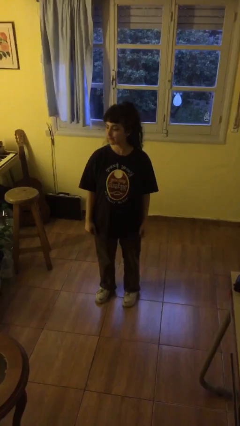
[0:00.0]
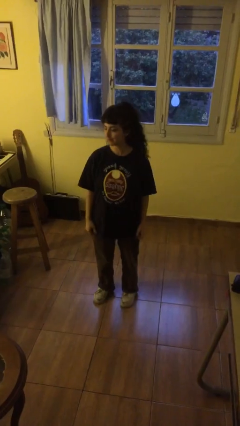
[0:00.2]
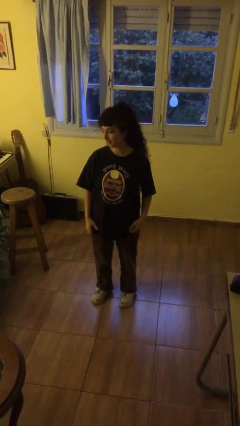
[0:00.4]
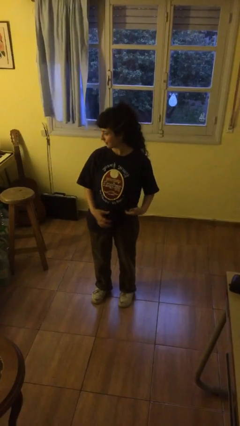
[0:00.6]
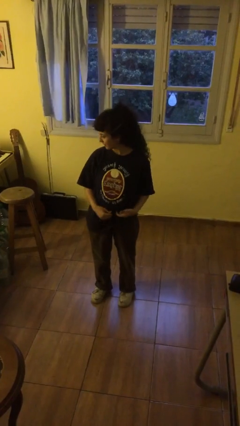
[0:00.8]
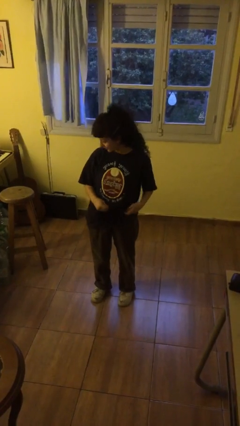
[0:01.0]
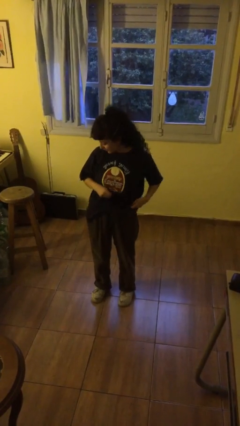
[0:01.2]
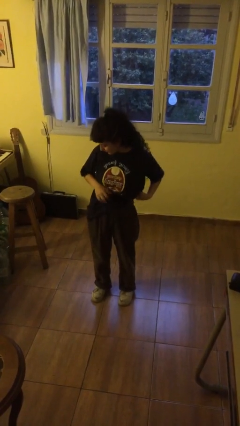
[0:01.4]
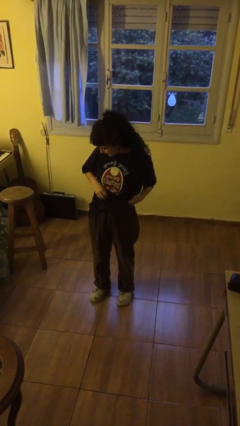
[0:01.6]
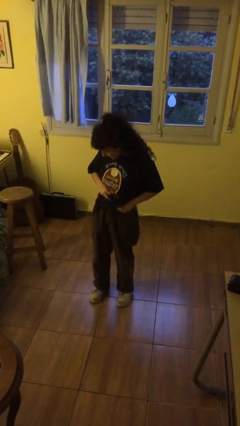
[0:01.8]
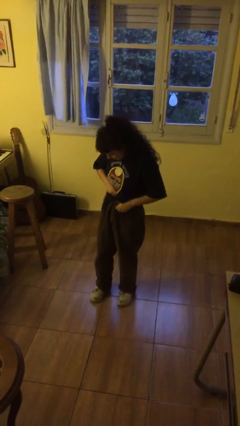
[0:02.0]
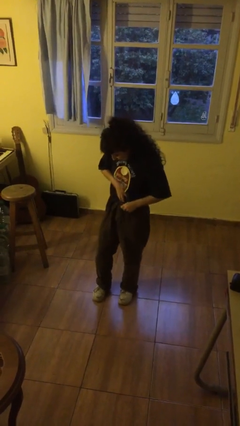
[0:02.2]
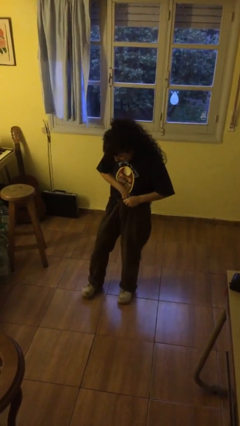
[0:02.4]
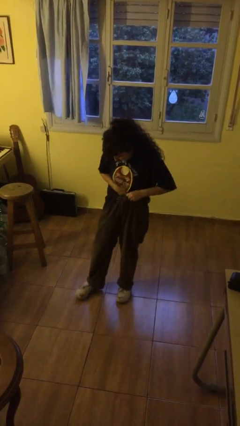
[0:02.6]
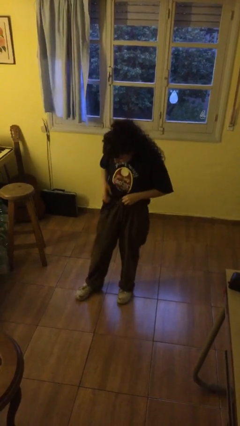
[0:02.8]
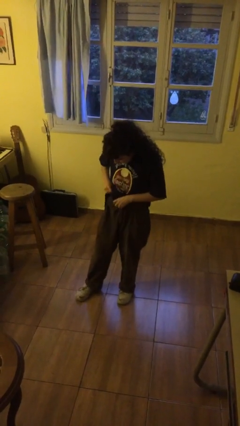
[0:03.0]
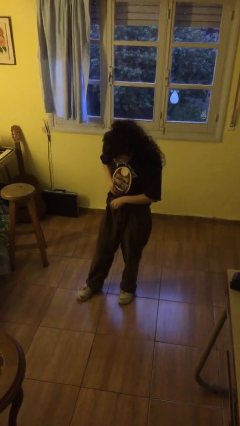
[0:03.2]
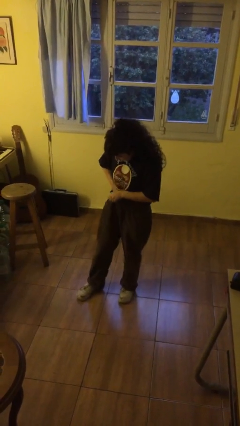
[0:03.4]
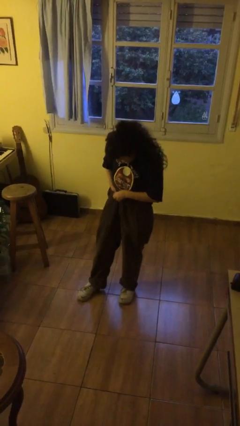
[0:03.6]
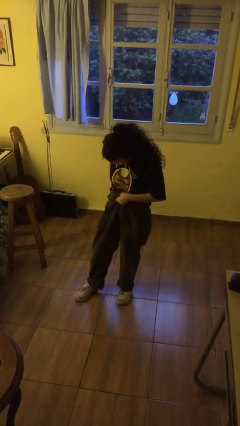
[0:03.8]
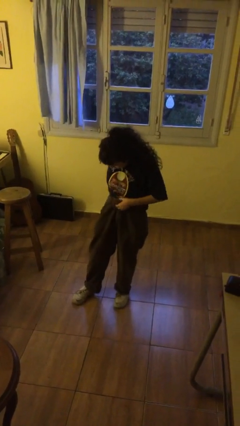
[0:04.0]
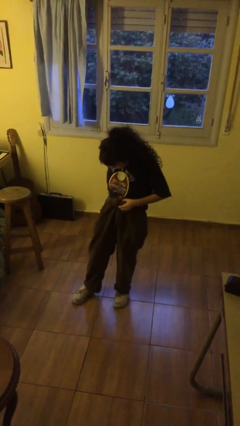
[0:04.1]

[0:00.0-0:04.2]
person tucks in shirt

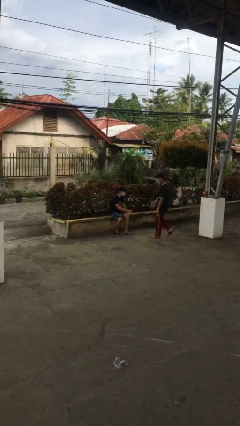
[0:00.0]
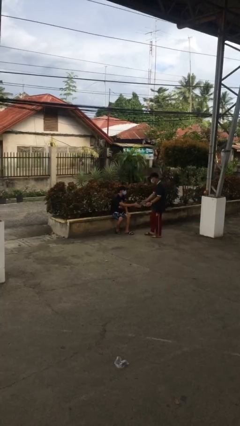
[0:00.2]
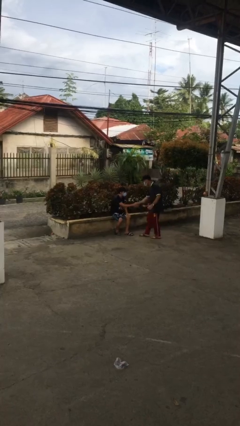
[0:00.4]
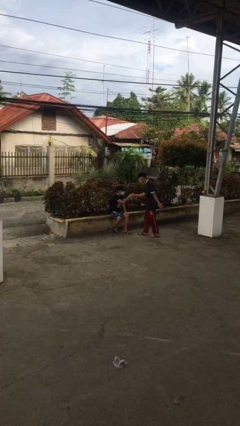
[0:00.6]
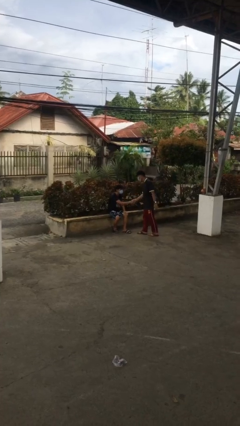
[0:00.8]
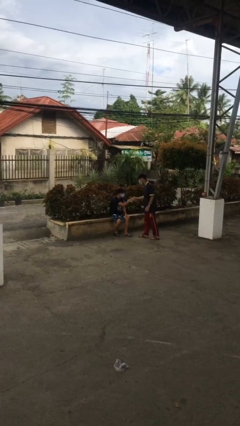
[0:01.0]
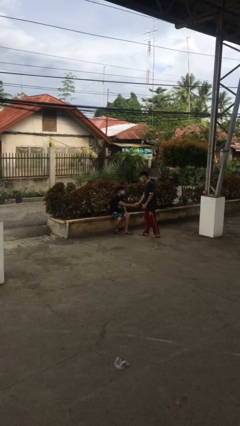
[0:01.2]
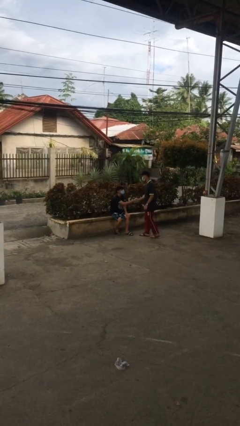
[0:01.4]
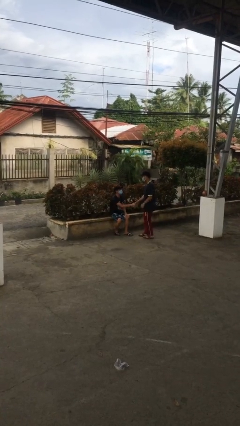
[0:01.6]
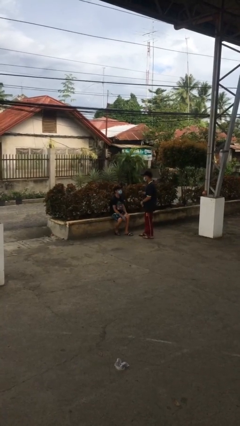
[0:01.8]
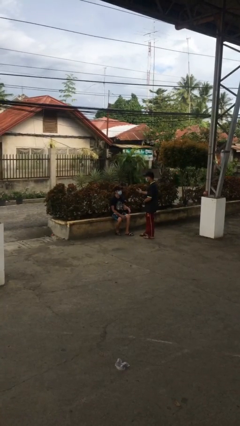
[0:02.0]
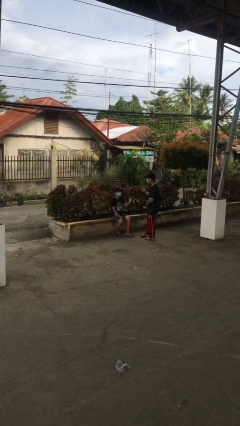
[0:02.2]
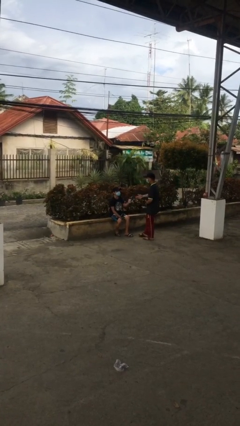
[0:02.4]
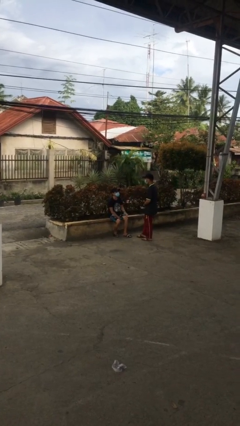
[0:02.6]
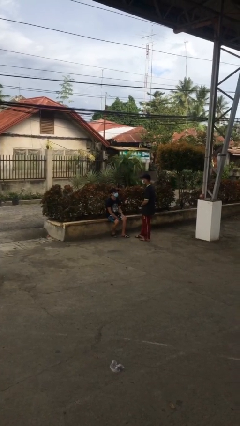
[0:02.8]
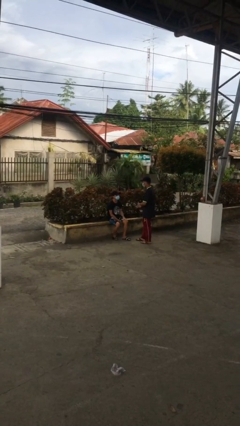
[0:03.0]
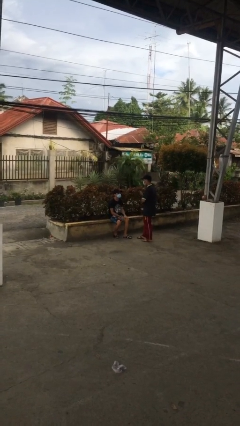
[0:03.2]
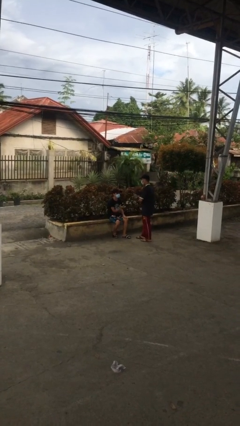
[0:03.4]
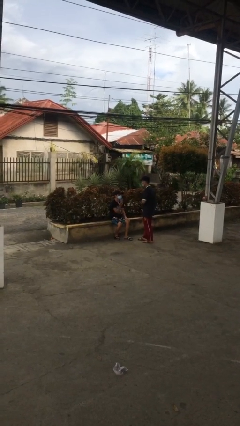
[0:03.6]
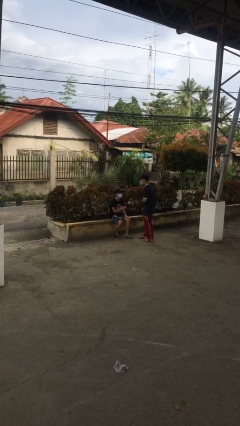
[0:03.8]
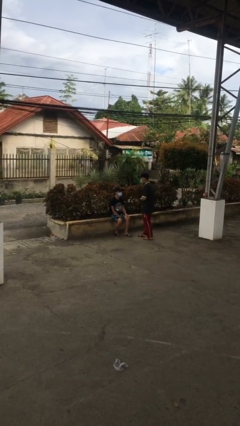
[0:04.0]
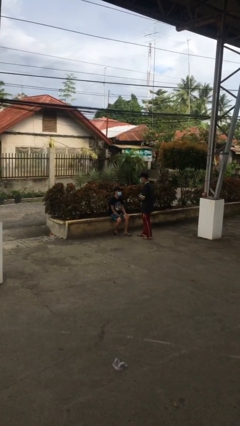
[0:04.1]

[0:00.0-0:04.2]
person shakes hand

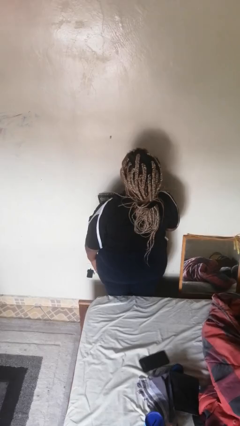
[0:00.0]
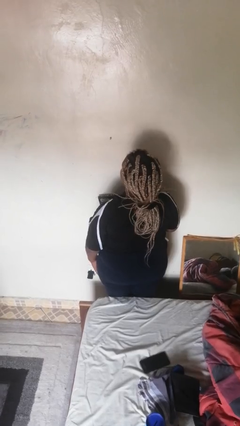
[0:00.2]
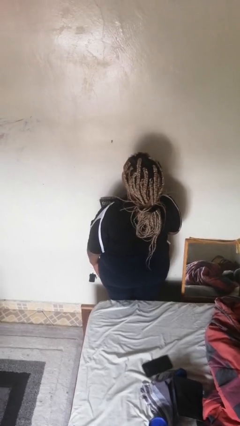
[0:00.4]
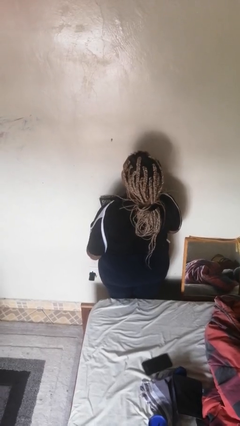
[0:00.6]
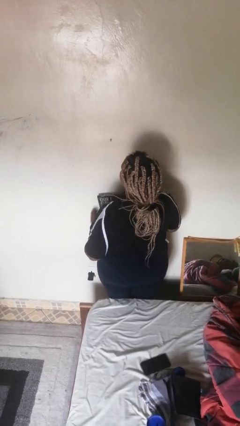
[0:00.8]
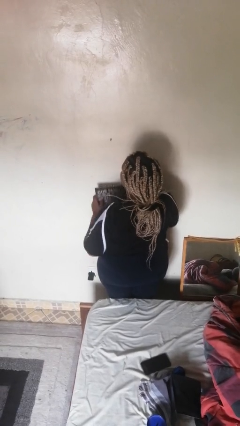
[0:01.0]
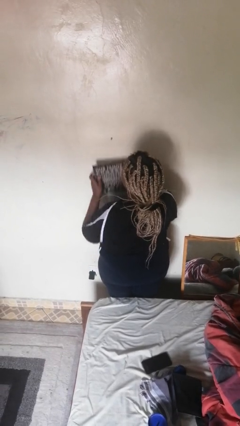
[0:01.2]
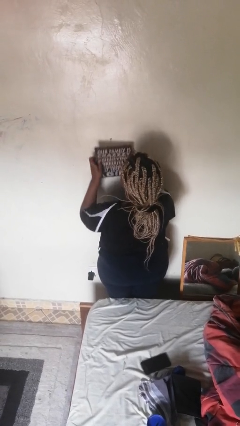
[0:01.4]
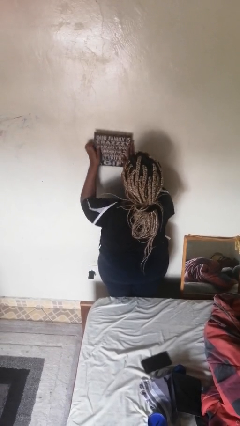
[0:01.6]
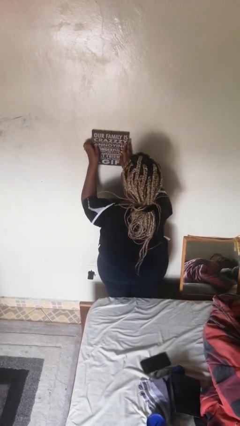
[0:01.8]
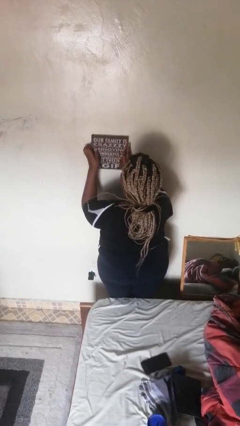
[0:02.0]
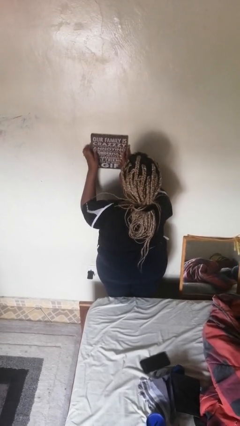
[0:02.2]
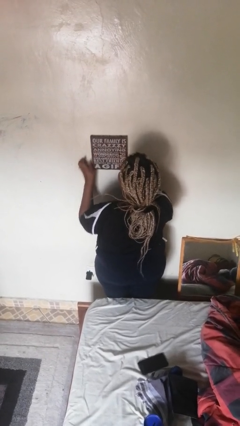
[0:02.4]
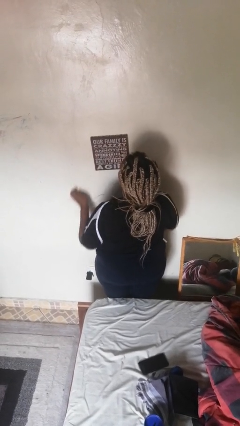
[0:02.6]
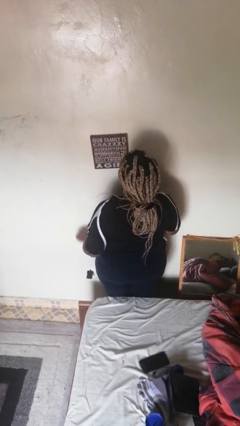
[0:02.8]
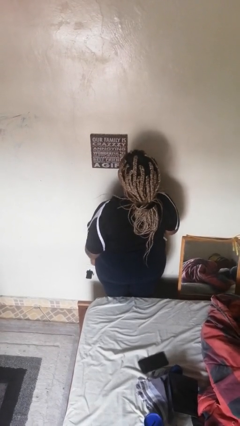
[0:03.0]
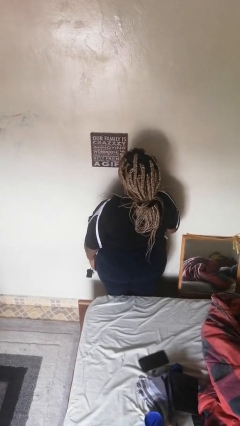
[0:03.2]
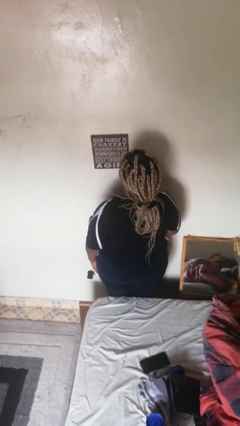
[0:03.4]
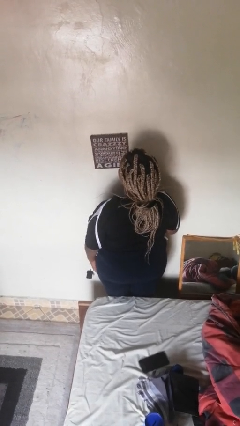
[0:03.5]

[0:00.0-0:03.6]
person puts up picture frame

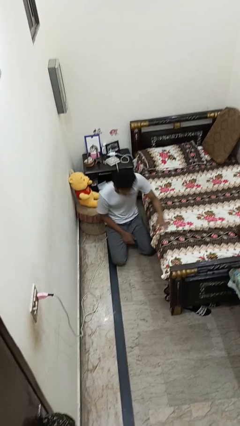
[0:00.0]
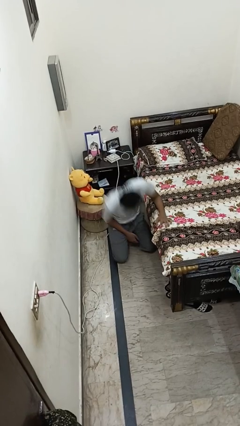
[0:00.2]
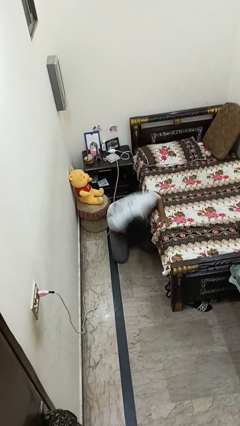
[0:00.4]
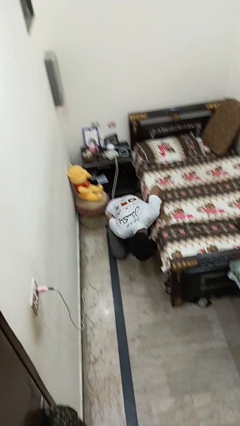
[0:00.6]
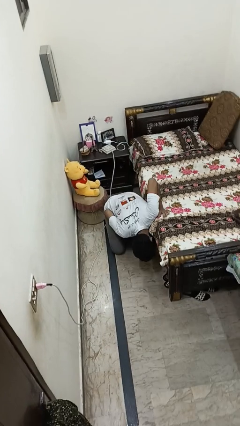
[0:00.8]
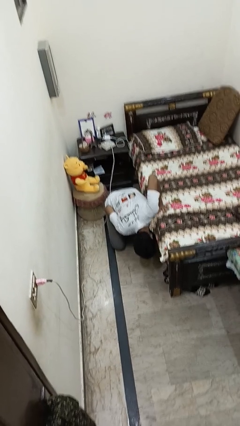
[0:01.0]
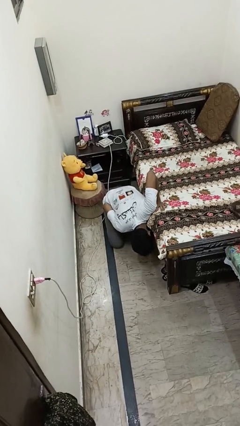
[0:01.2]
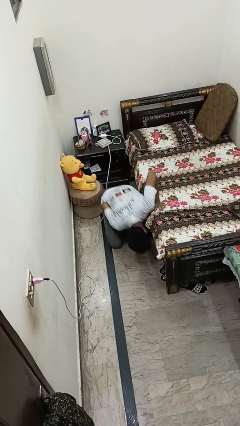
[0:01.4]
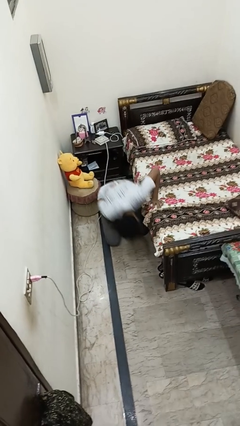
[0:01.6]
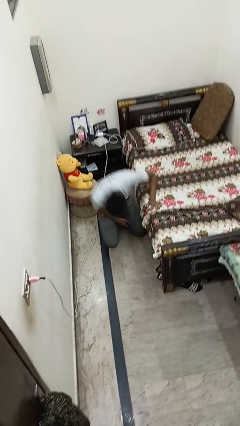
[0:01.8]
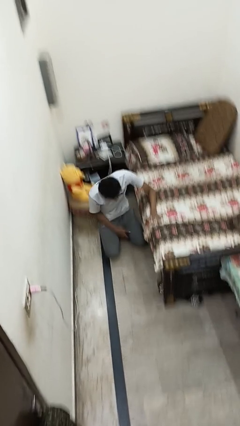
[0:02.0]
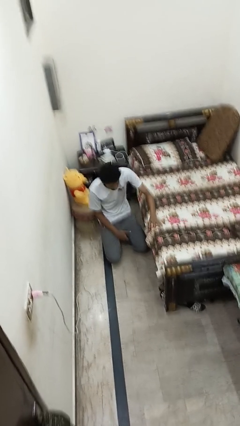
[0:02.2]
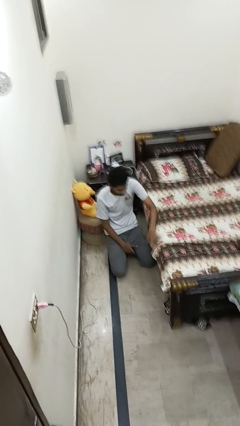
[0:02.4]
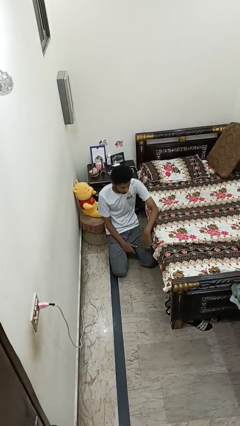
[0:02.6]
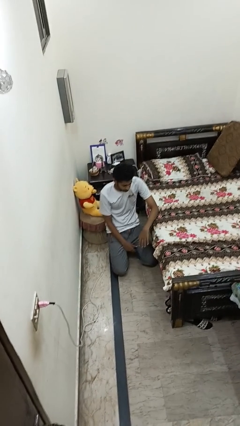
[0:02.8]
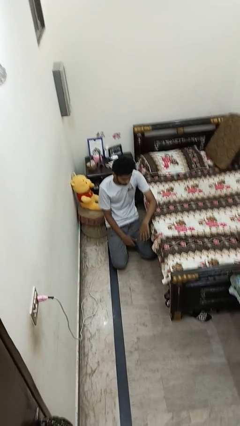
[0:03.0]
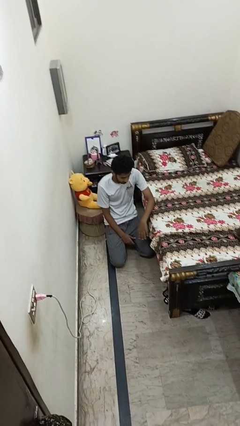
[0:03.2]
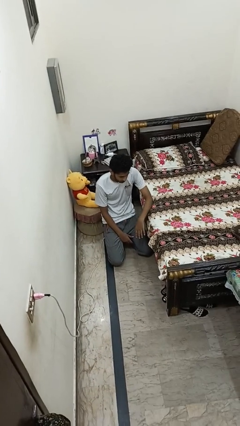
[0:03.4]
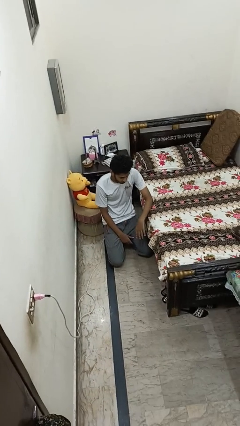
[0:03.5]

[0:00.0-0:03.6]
person searches under bed

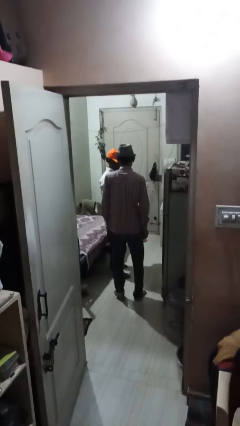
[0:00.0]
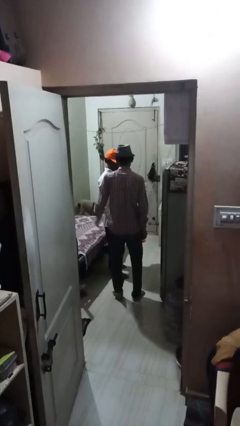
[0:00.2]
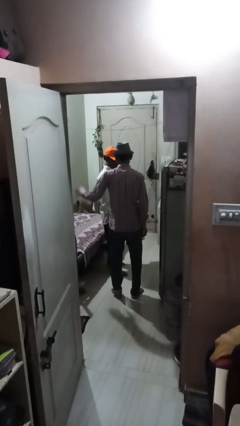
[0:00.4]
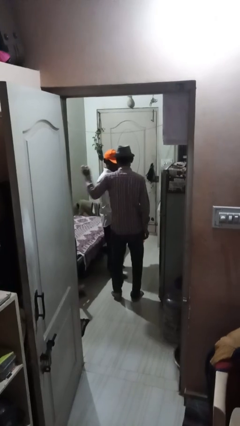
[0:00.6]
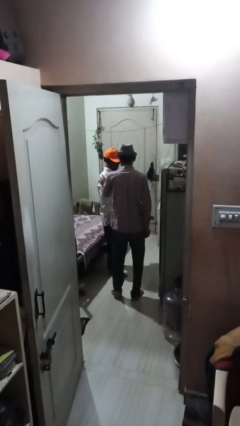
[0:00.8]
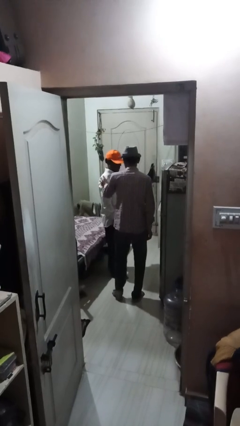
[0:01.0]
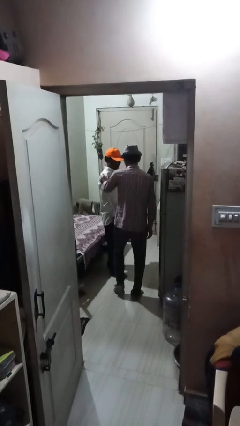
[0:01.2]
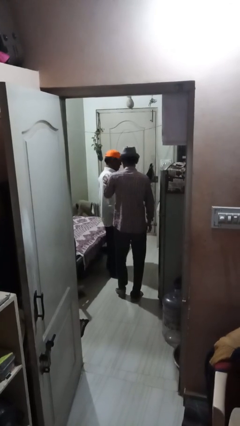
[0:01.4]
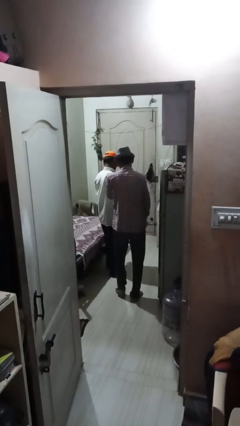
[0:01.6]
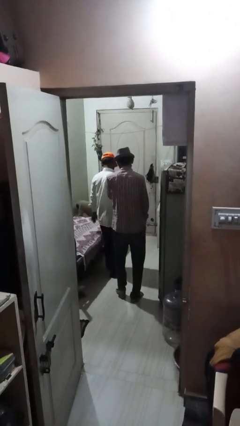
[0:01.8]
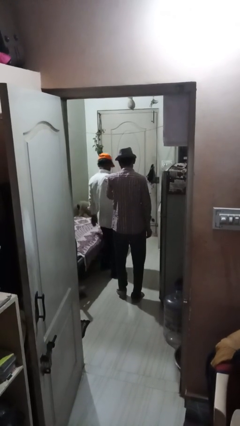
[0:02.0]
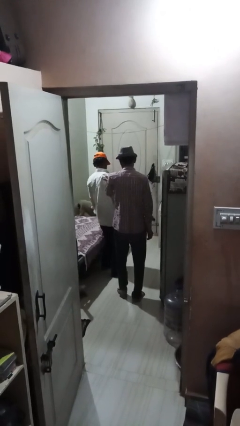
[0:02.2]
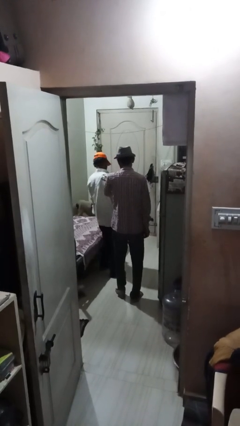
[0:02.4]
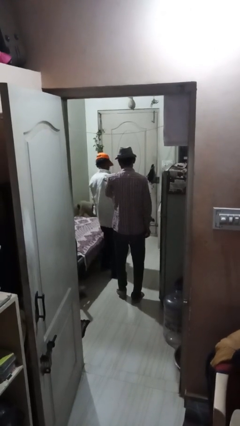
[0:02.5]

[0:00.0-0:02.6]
person pounds shoulders of person
